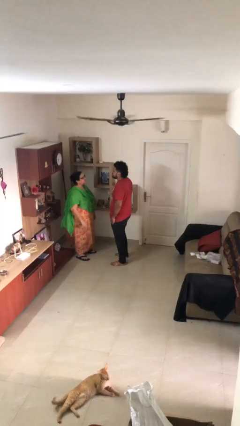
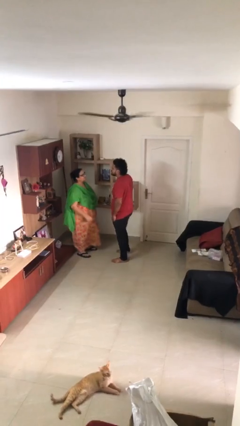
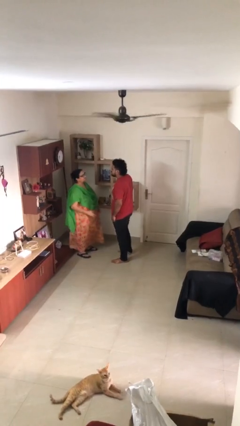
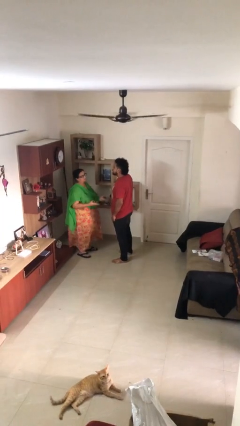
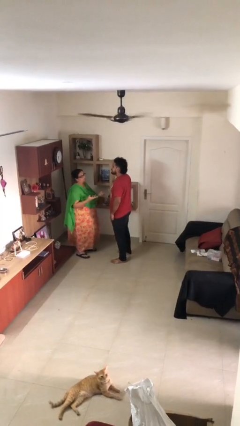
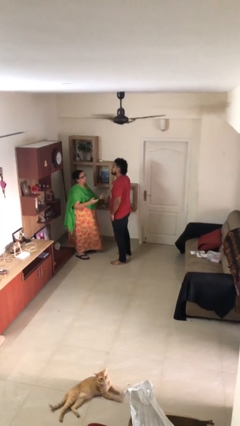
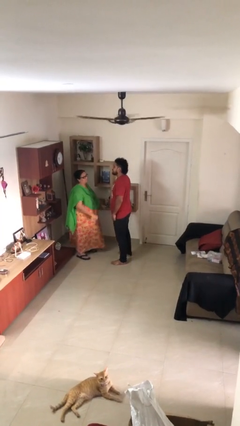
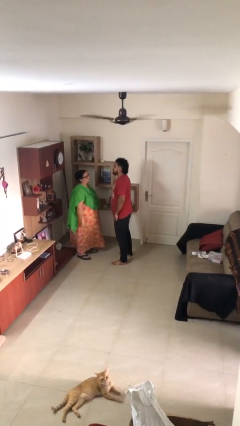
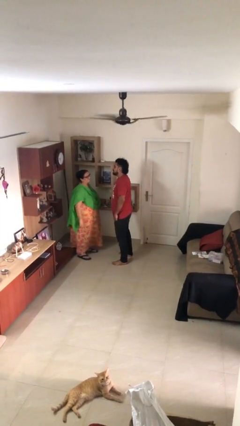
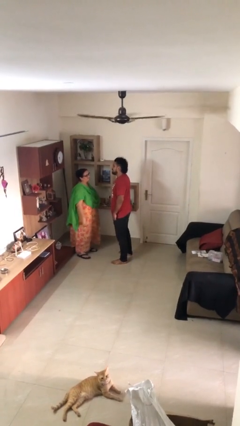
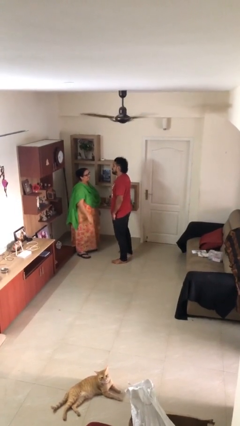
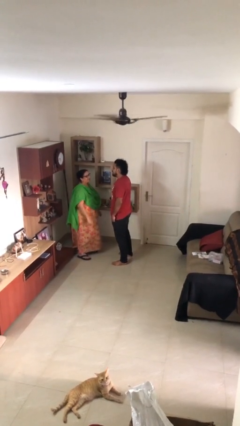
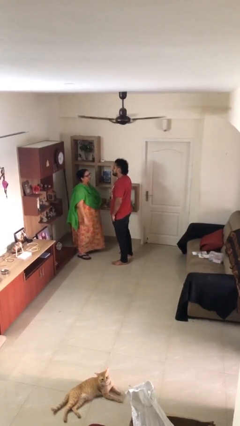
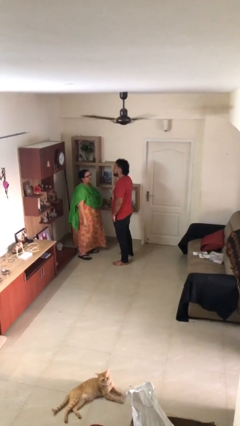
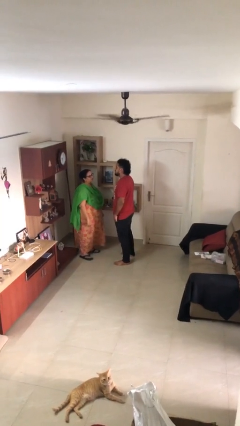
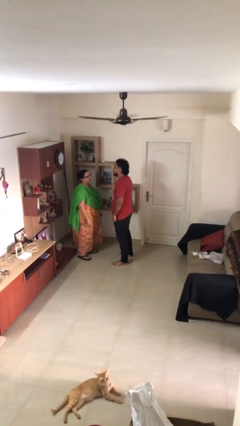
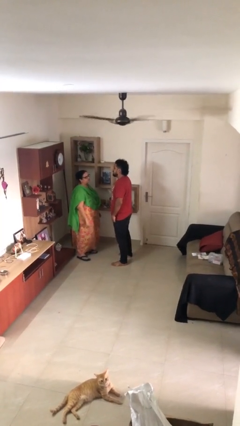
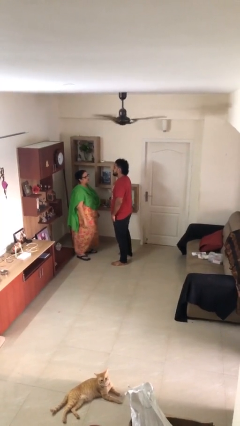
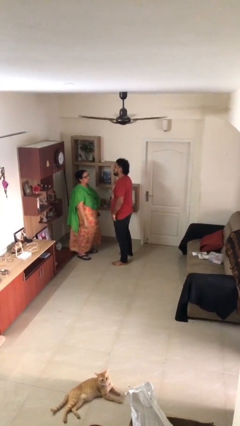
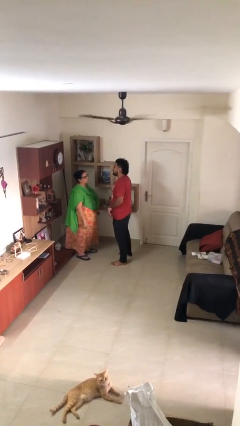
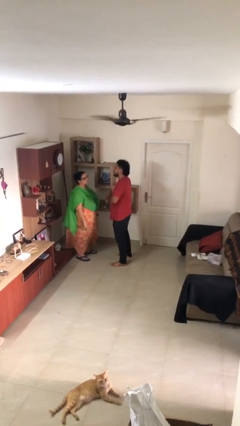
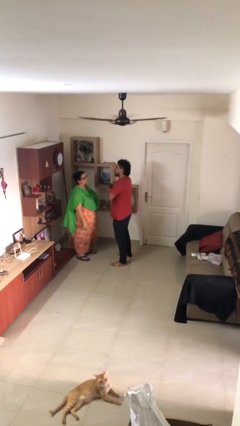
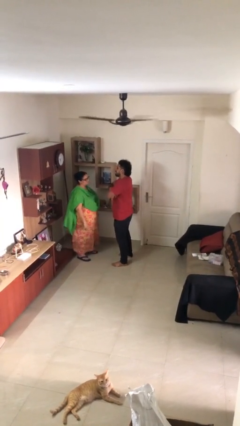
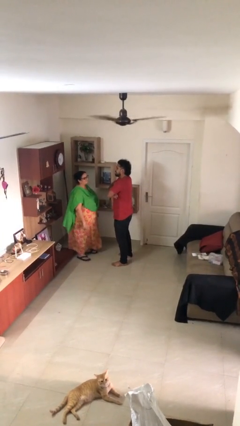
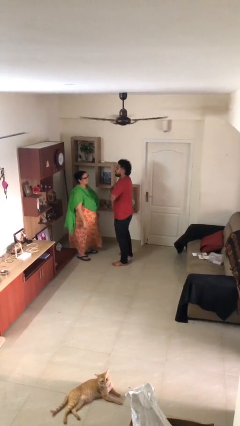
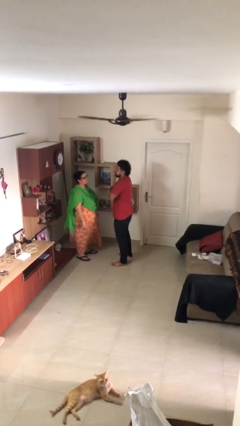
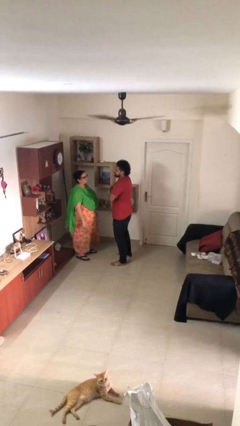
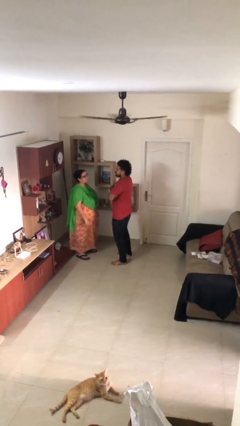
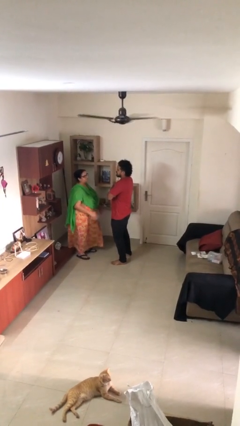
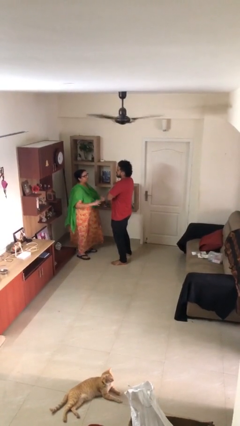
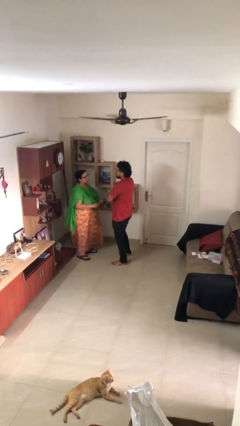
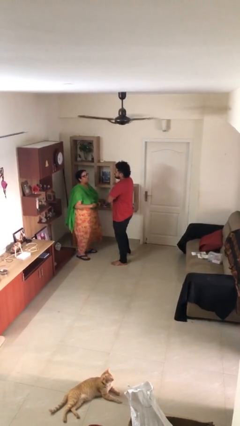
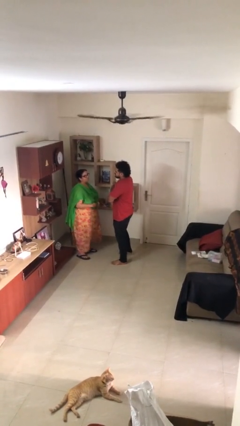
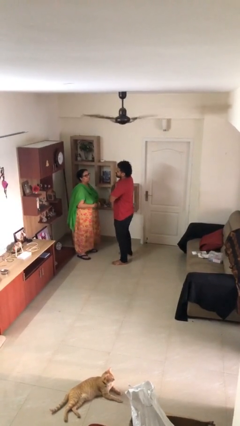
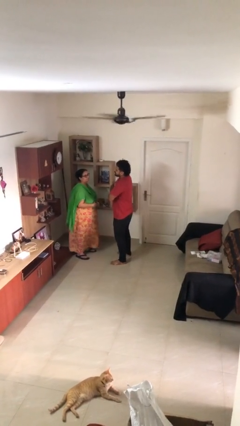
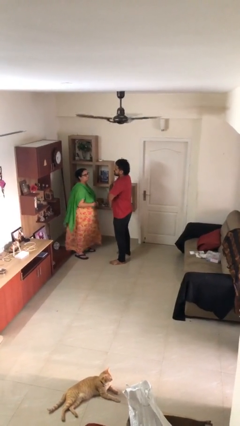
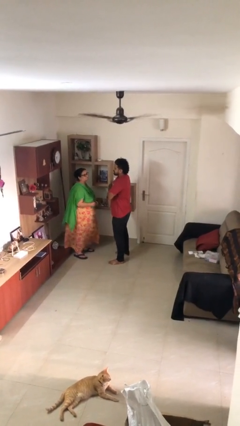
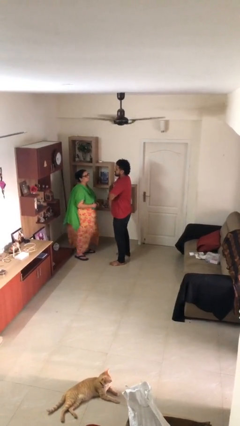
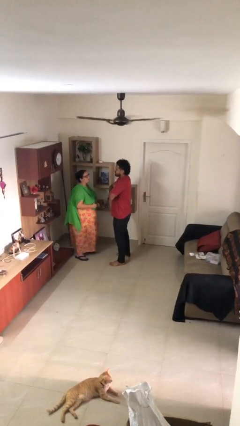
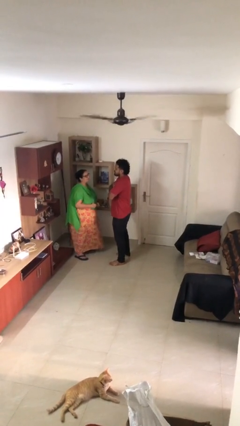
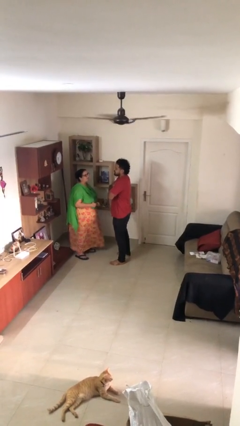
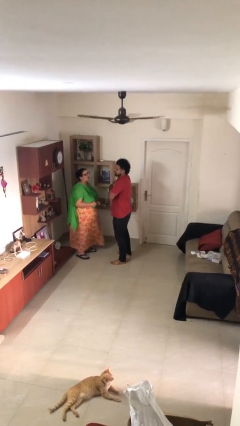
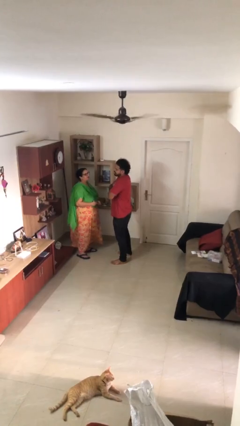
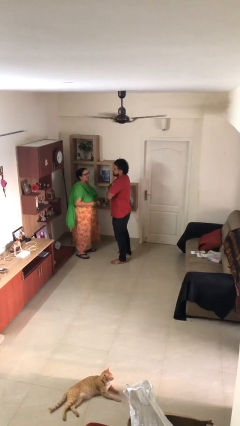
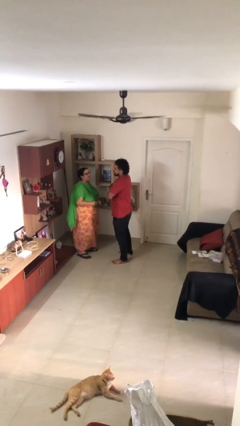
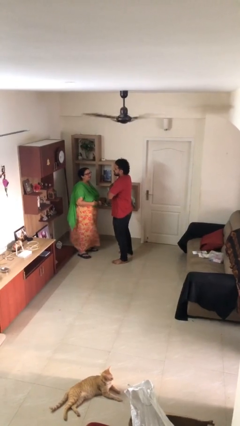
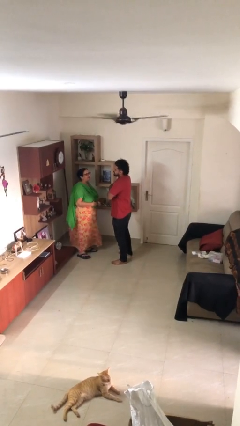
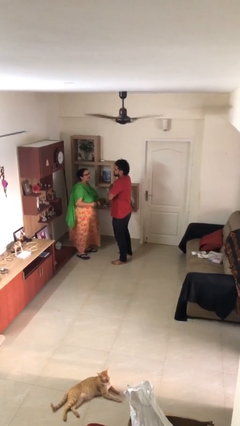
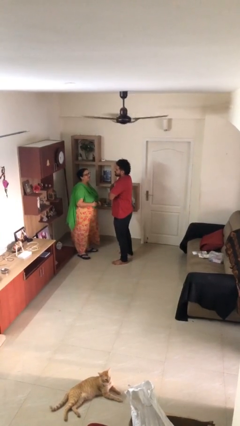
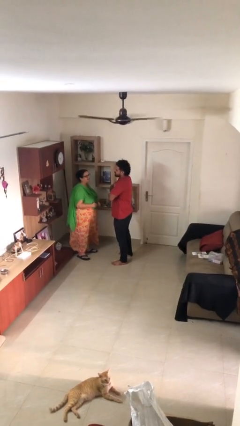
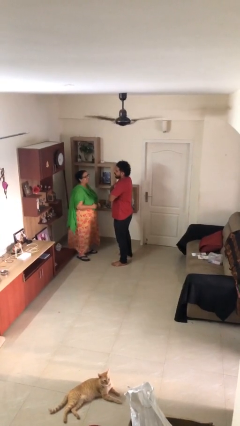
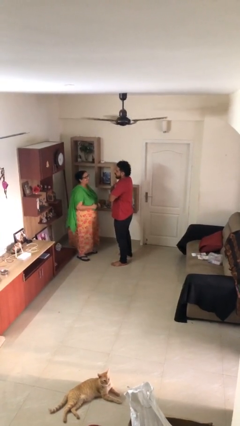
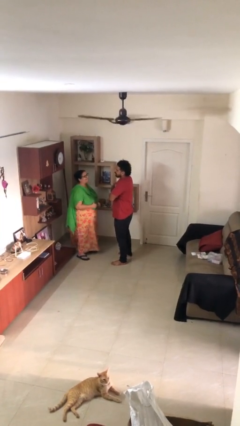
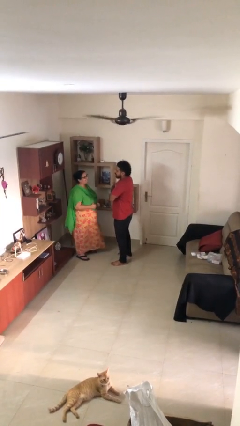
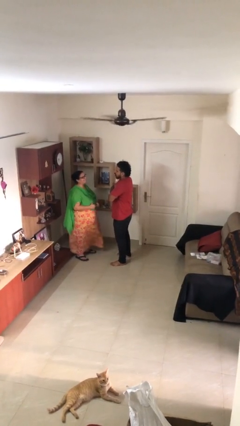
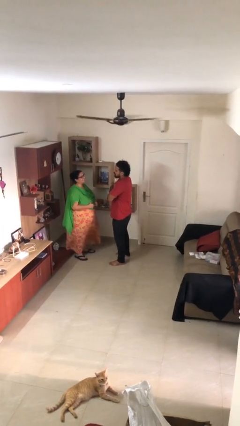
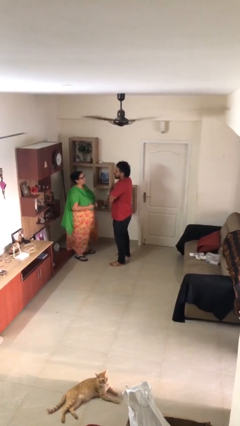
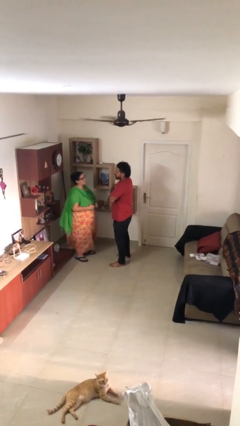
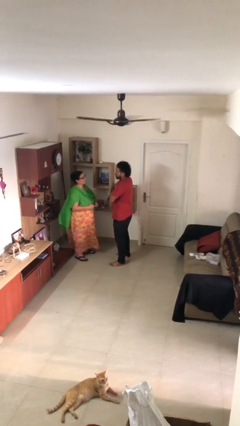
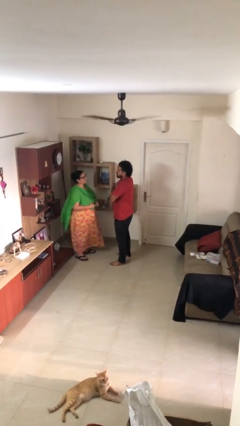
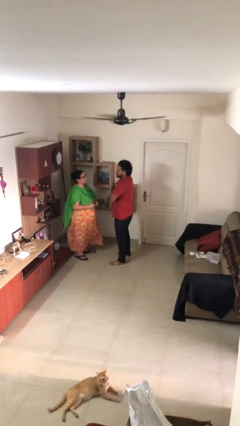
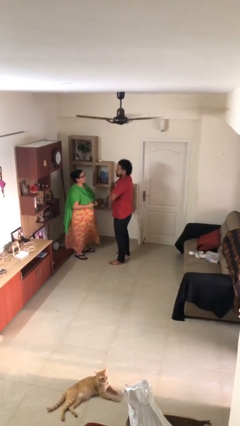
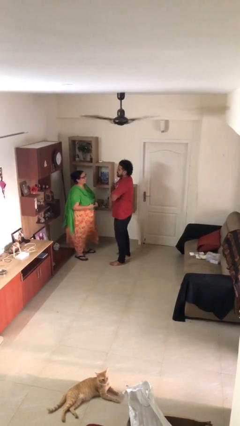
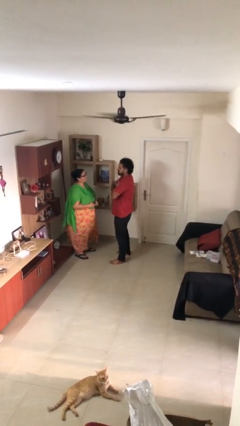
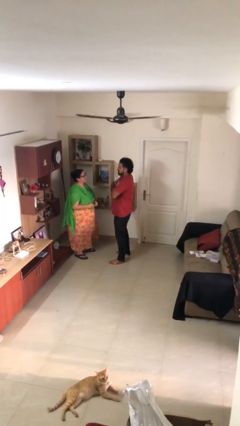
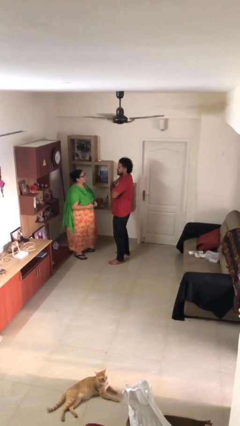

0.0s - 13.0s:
person talks to person

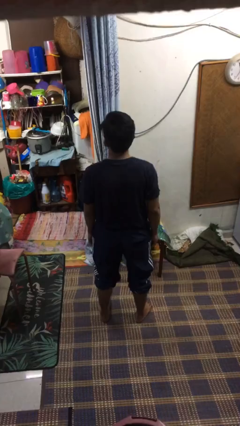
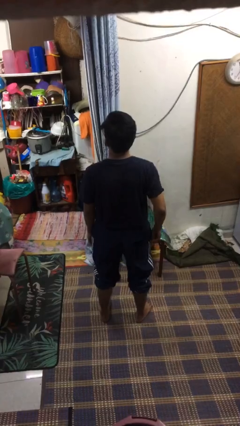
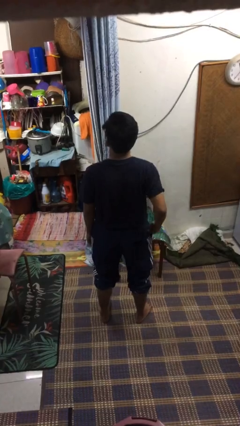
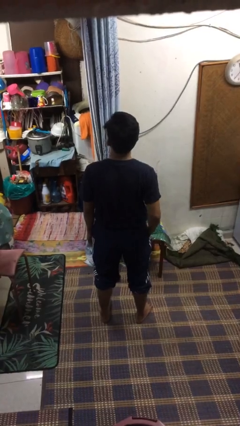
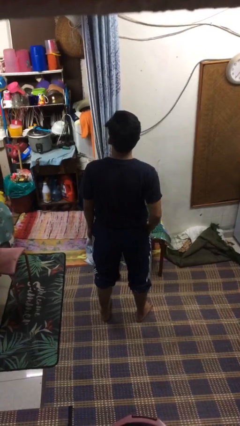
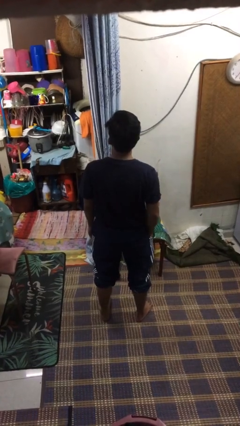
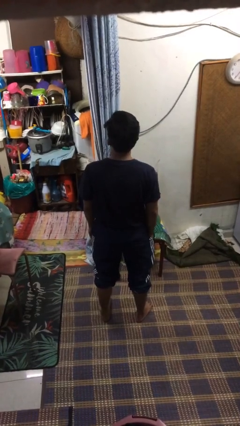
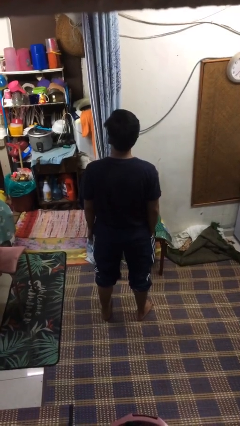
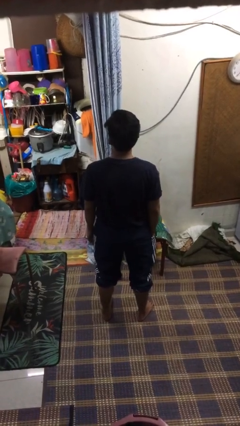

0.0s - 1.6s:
person puts hands in back pockets

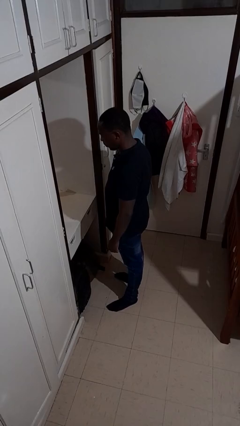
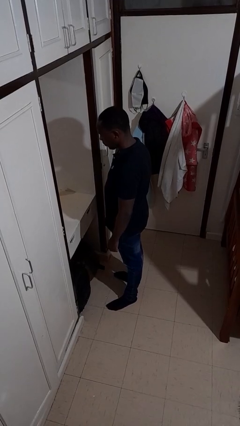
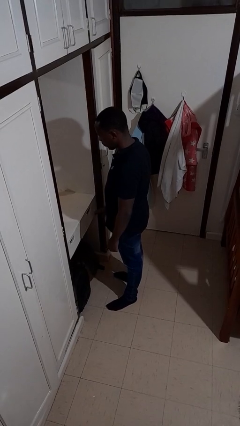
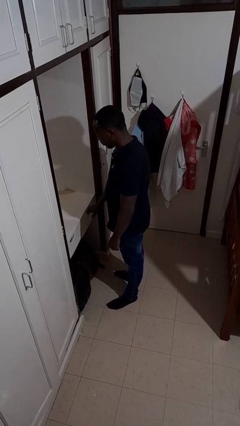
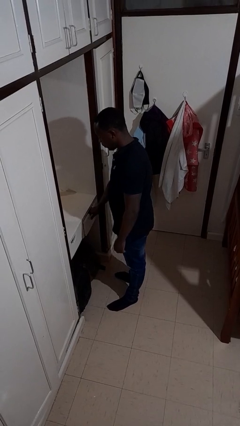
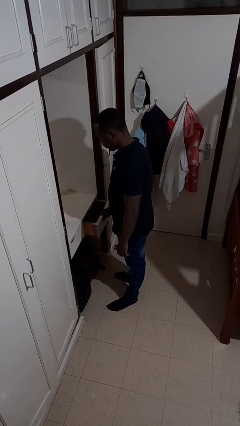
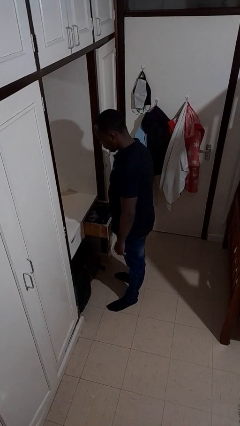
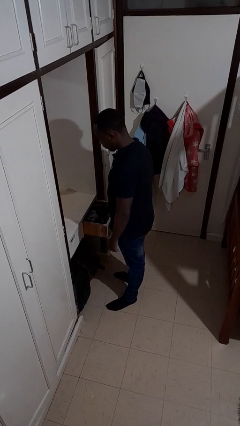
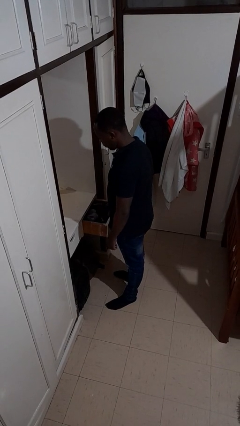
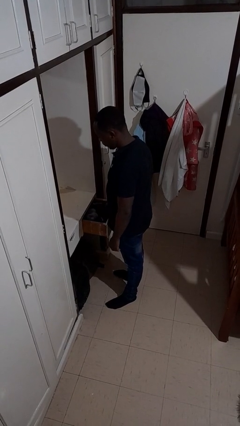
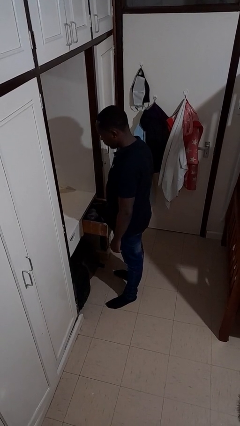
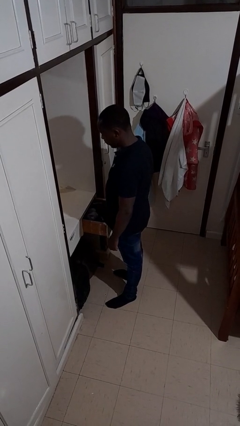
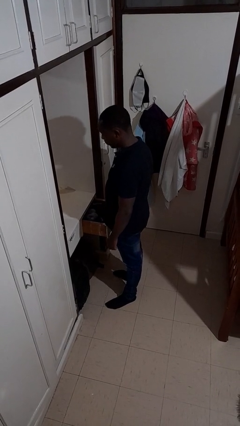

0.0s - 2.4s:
person opens dresser drawer

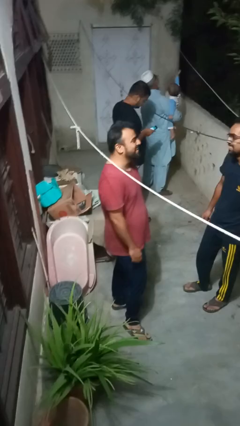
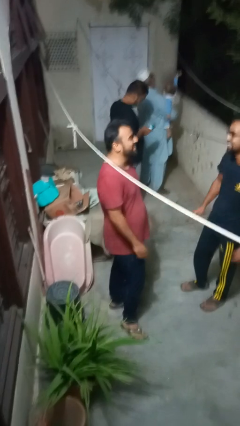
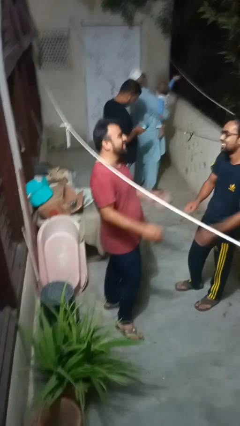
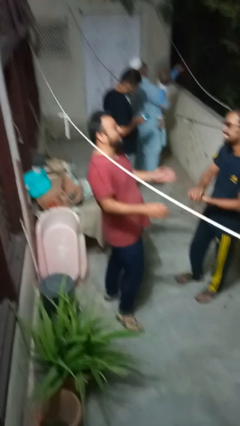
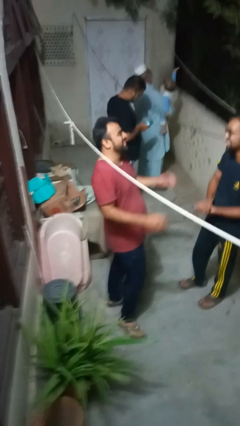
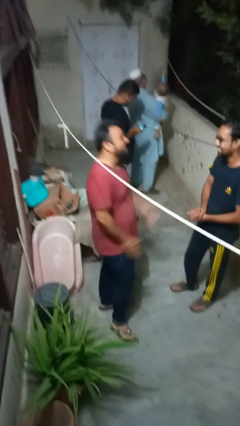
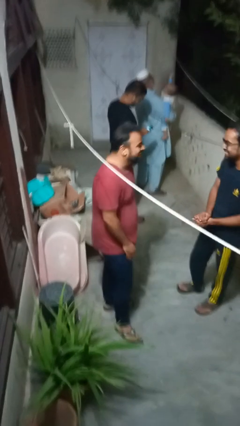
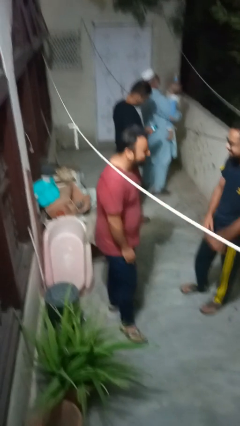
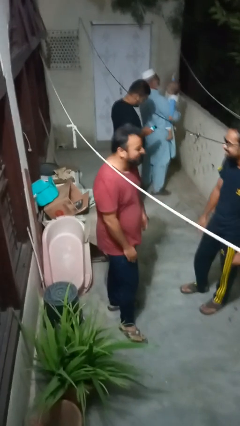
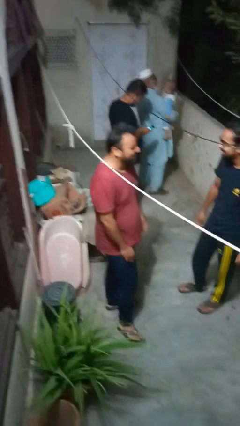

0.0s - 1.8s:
person laughs with person
